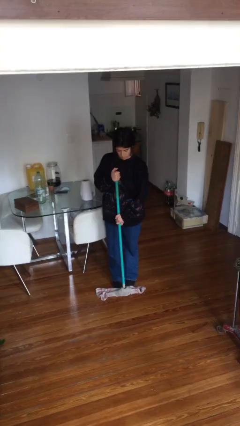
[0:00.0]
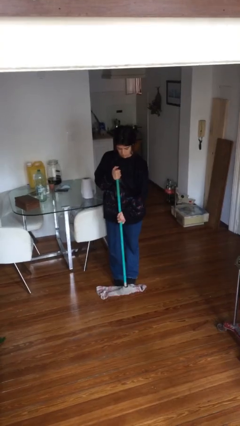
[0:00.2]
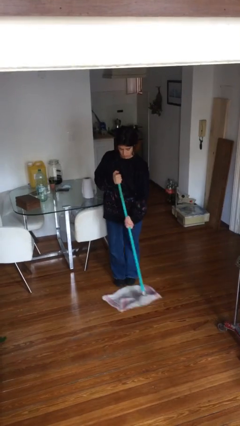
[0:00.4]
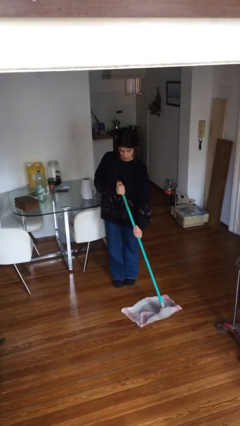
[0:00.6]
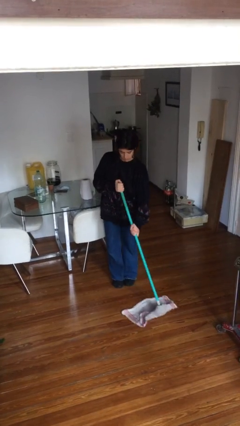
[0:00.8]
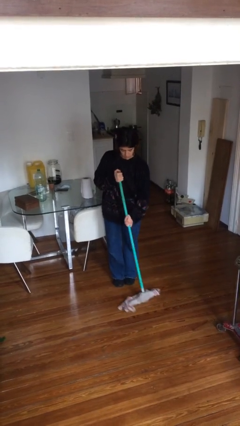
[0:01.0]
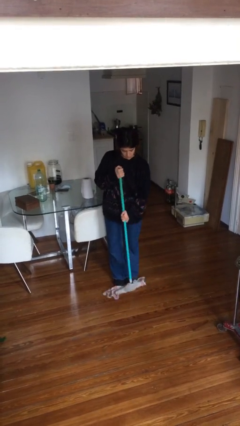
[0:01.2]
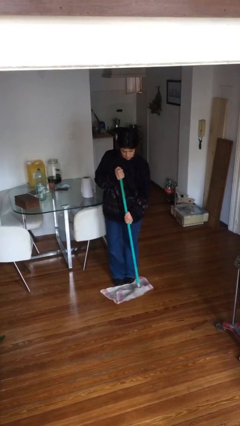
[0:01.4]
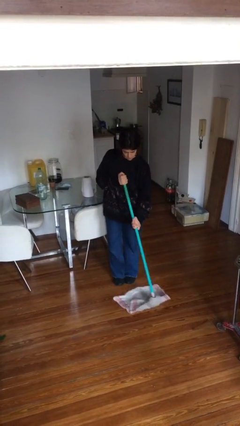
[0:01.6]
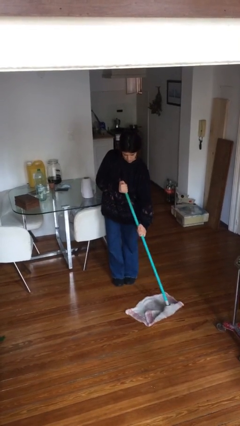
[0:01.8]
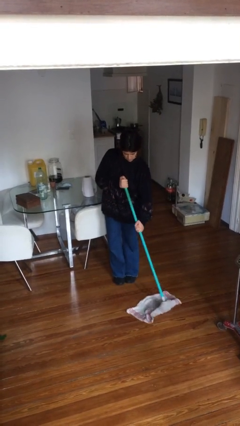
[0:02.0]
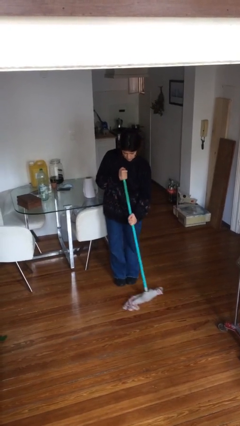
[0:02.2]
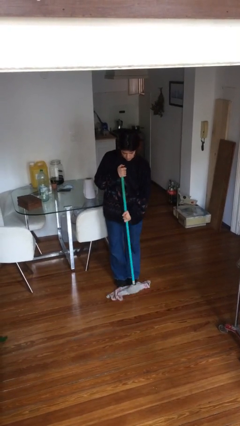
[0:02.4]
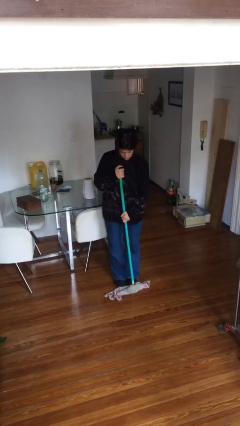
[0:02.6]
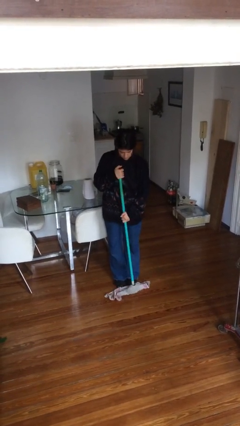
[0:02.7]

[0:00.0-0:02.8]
person mops

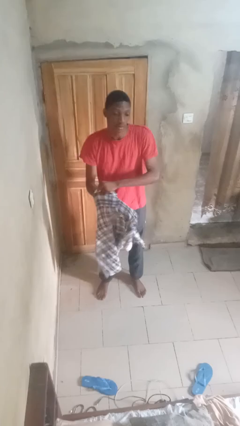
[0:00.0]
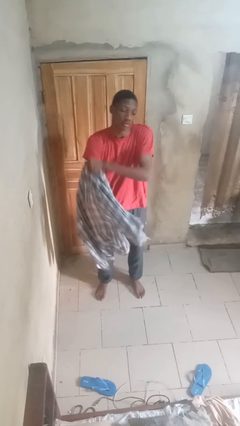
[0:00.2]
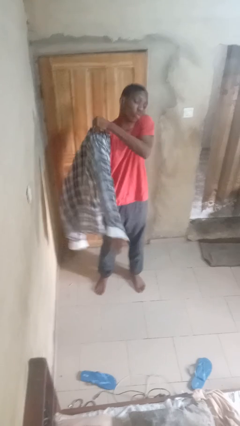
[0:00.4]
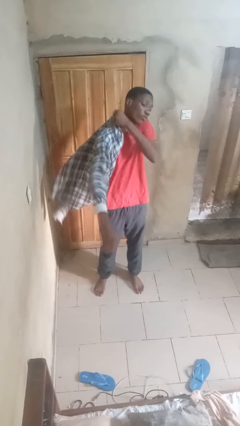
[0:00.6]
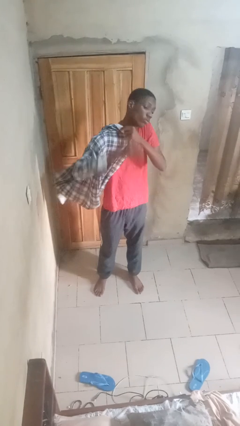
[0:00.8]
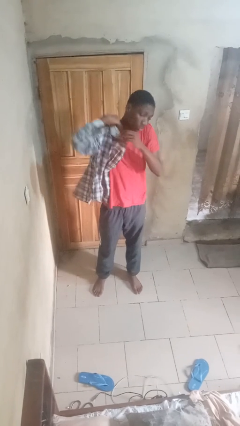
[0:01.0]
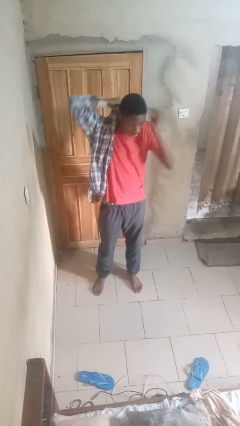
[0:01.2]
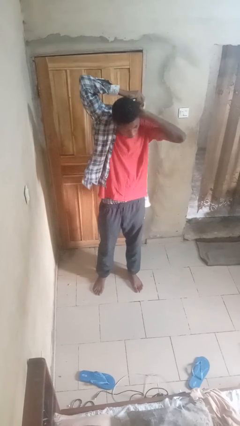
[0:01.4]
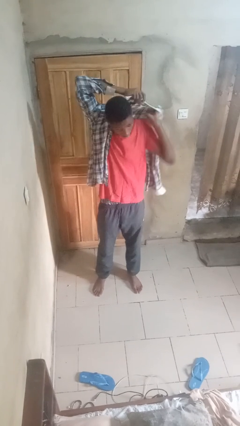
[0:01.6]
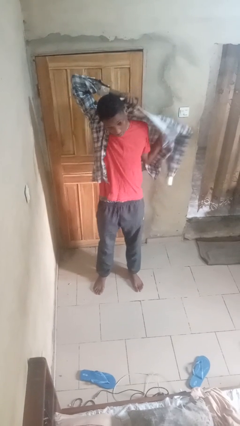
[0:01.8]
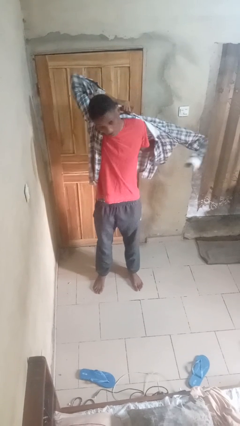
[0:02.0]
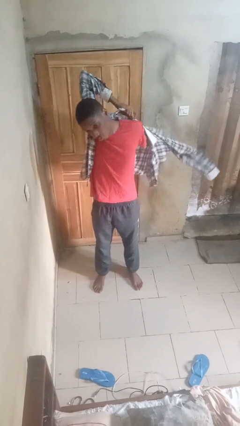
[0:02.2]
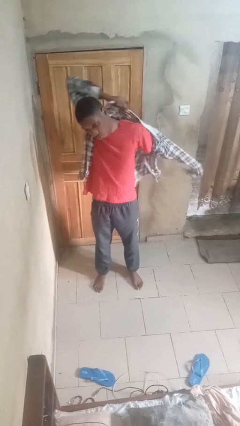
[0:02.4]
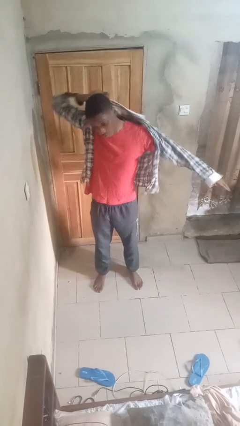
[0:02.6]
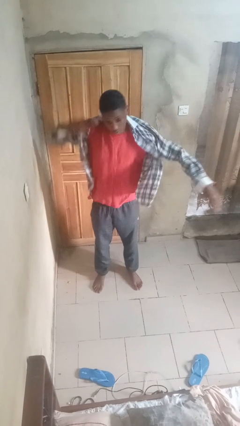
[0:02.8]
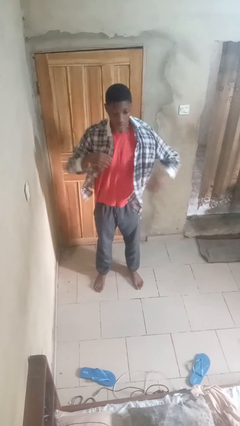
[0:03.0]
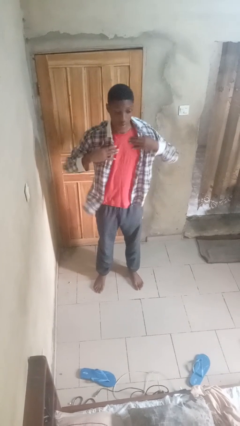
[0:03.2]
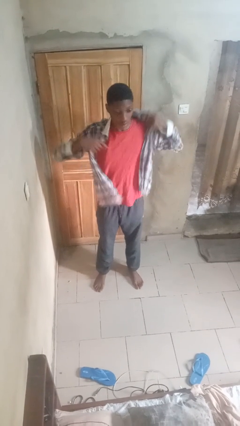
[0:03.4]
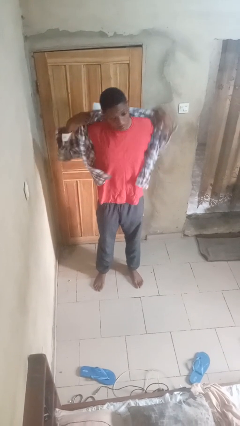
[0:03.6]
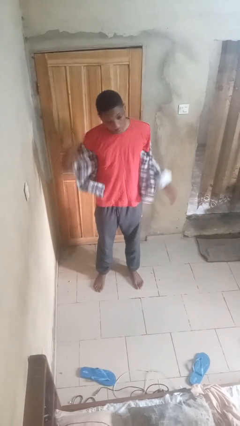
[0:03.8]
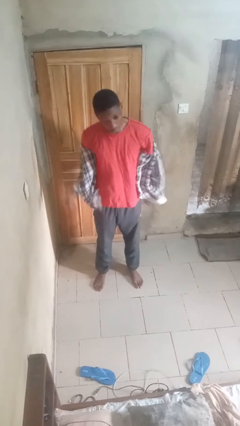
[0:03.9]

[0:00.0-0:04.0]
person puts on shirt

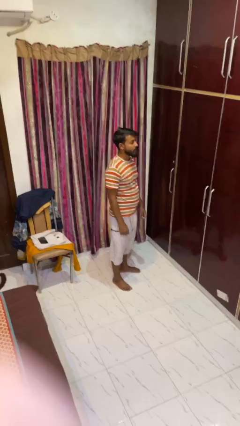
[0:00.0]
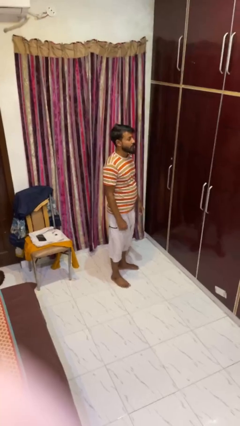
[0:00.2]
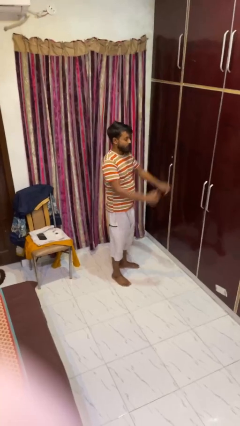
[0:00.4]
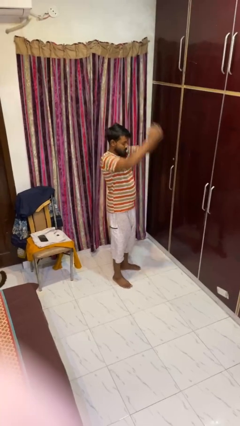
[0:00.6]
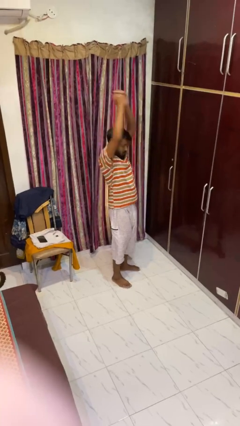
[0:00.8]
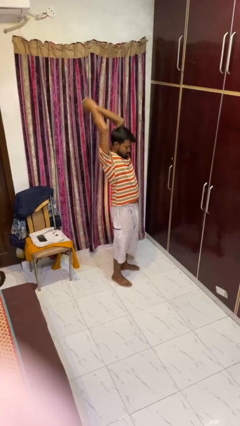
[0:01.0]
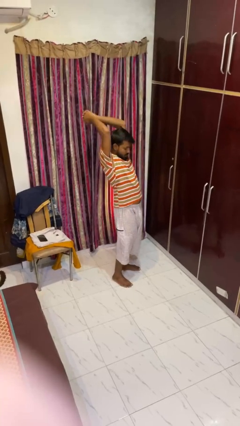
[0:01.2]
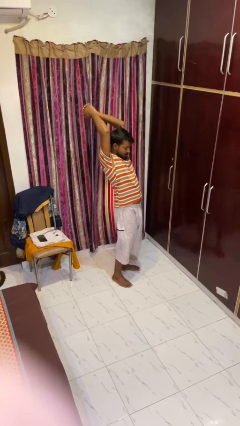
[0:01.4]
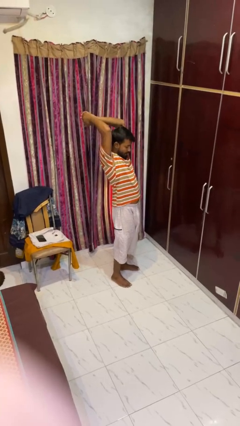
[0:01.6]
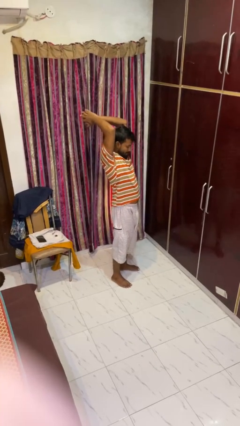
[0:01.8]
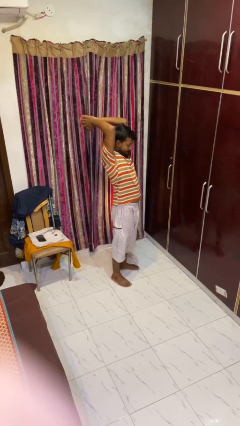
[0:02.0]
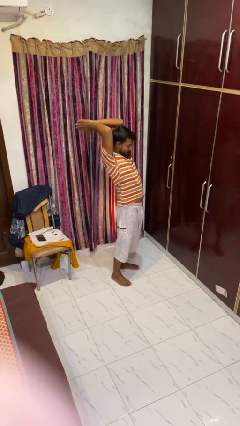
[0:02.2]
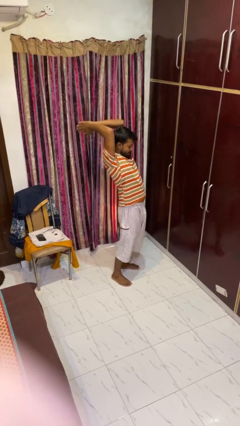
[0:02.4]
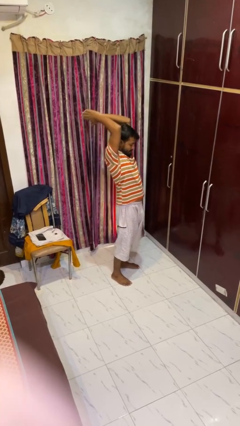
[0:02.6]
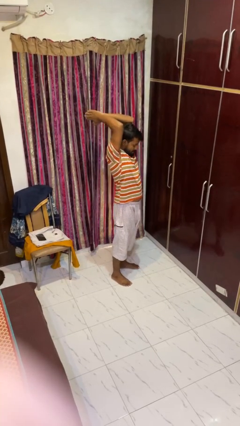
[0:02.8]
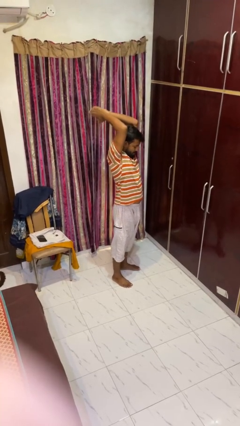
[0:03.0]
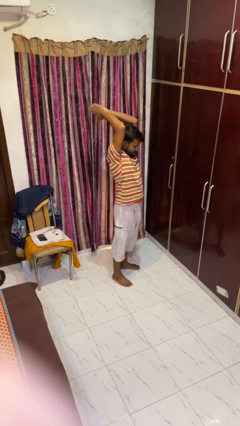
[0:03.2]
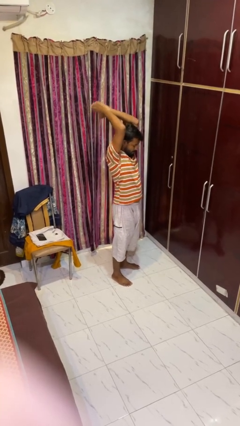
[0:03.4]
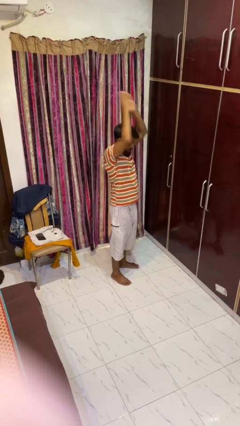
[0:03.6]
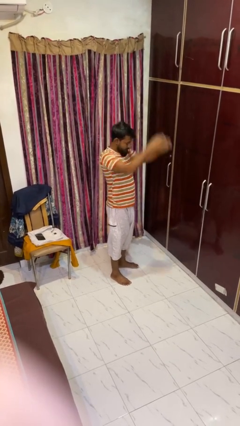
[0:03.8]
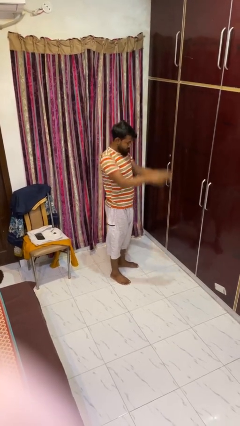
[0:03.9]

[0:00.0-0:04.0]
person stretches arms over head

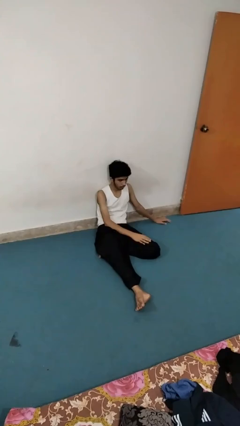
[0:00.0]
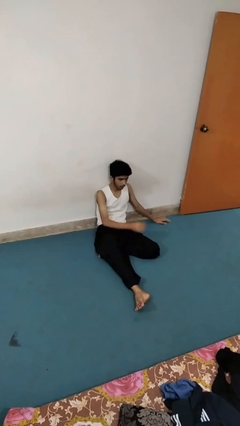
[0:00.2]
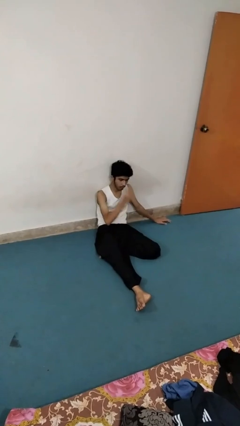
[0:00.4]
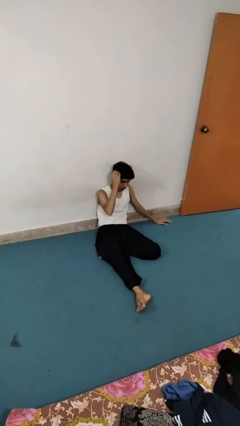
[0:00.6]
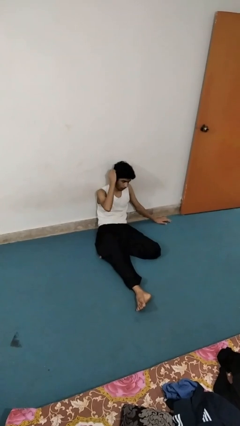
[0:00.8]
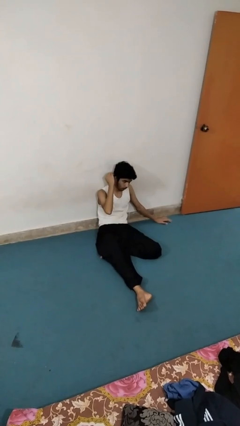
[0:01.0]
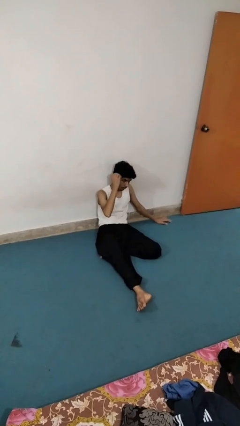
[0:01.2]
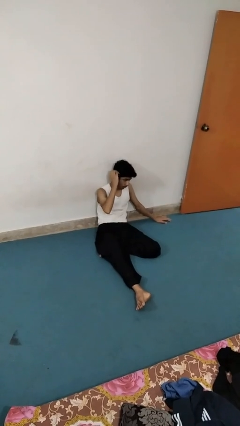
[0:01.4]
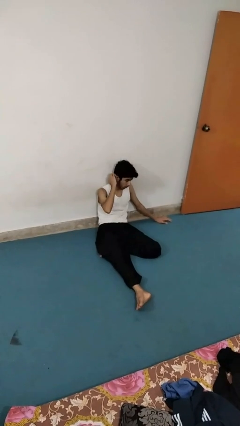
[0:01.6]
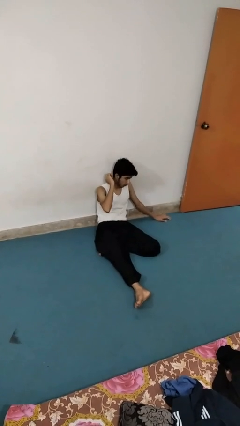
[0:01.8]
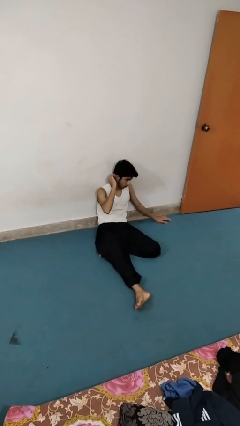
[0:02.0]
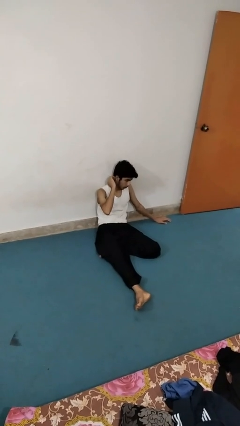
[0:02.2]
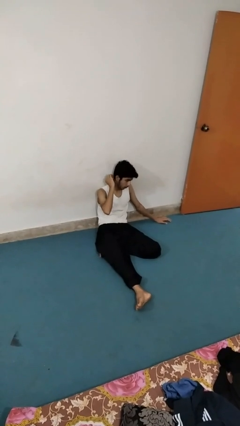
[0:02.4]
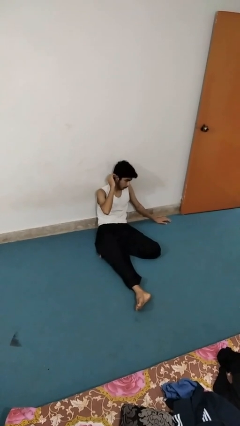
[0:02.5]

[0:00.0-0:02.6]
person strokes hair

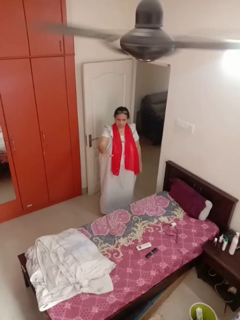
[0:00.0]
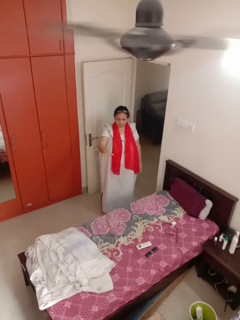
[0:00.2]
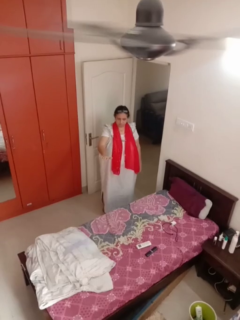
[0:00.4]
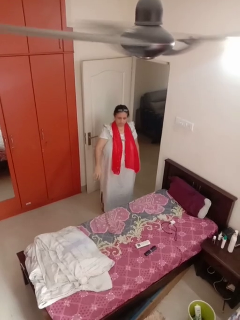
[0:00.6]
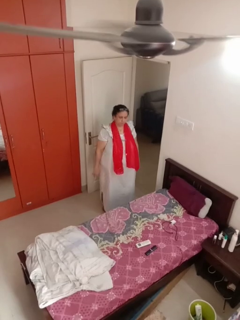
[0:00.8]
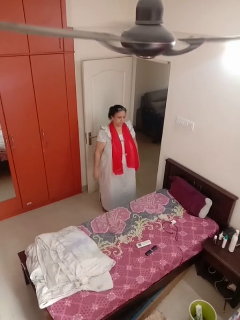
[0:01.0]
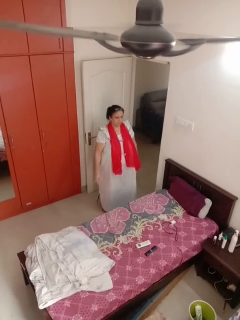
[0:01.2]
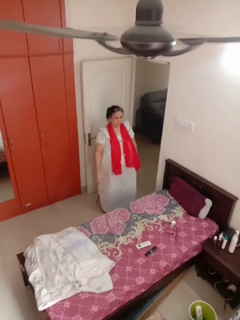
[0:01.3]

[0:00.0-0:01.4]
person gestures swipe down

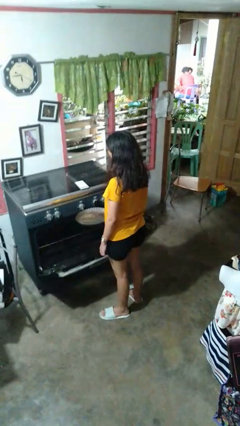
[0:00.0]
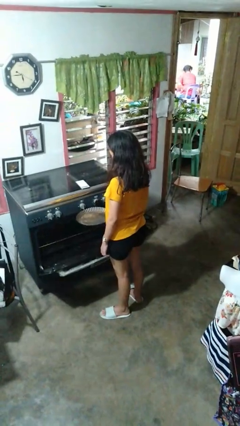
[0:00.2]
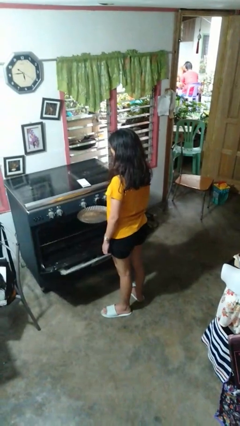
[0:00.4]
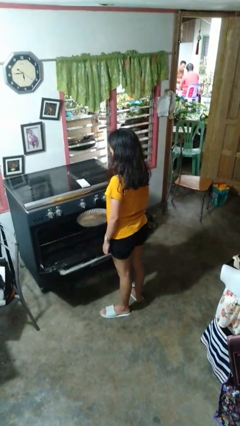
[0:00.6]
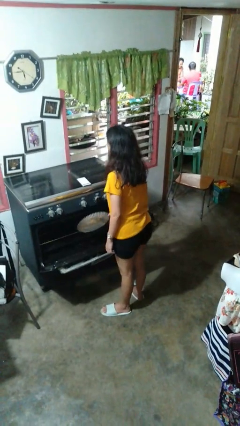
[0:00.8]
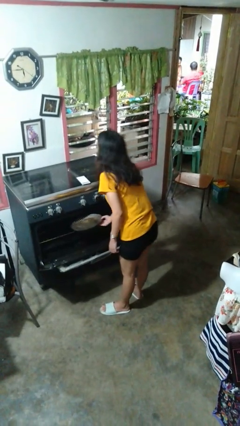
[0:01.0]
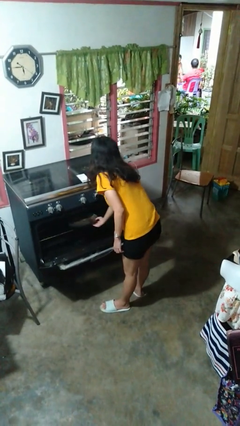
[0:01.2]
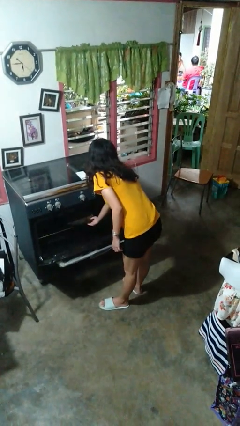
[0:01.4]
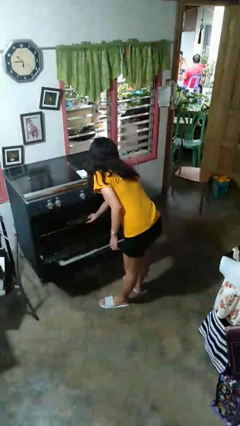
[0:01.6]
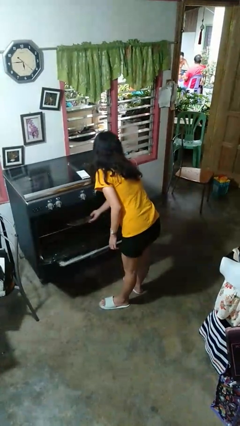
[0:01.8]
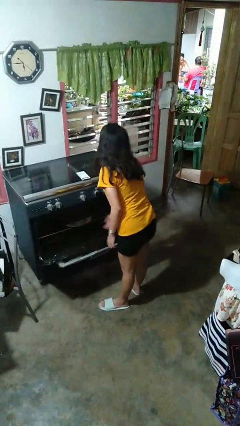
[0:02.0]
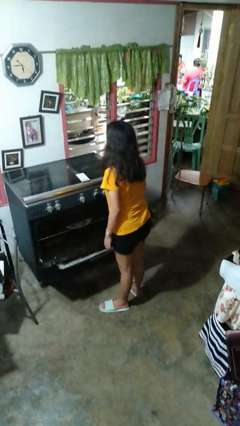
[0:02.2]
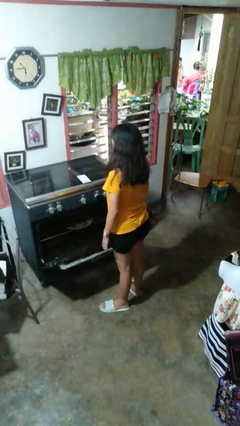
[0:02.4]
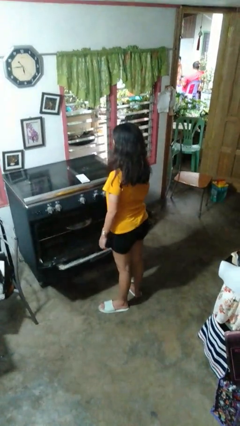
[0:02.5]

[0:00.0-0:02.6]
person puts object into oven

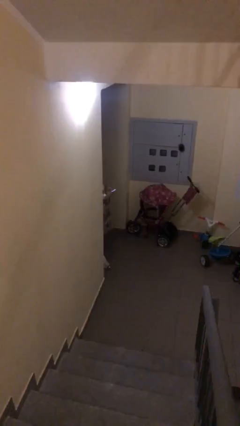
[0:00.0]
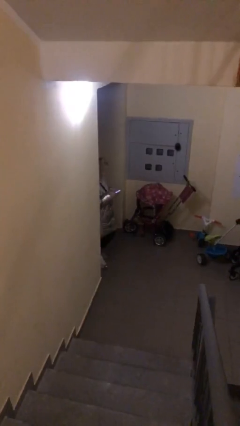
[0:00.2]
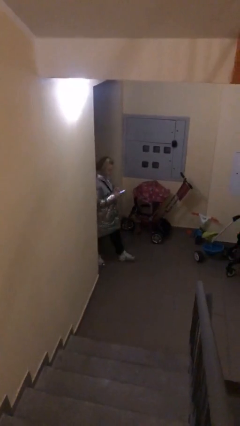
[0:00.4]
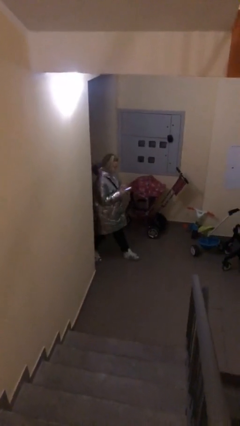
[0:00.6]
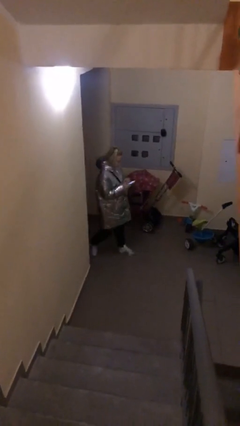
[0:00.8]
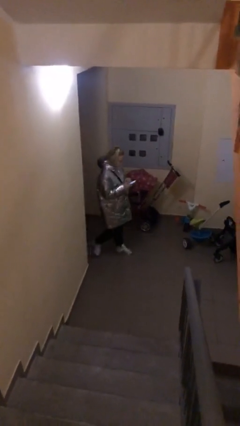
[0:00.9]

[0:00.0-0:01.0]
person enters scene through structure
